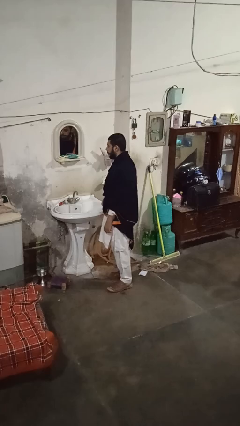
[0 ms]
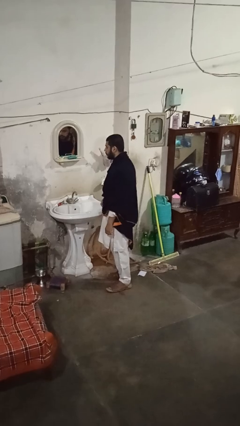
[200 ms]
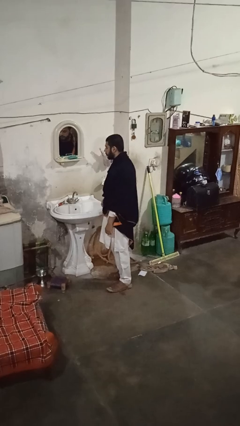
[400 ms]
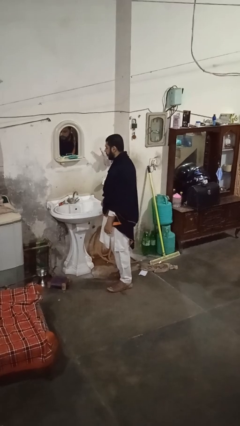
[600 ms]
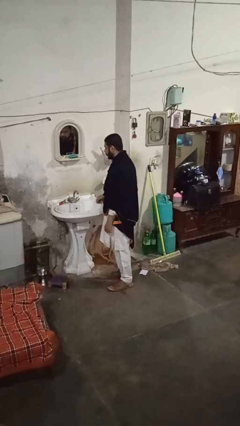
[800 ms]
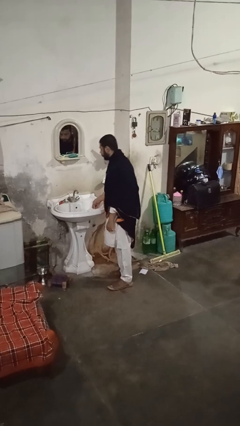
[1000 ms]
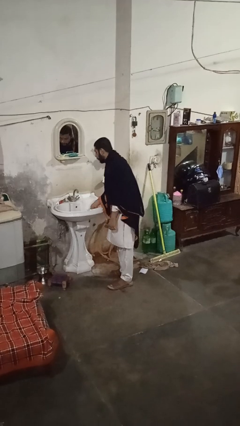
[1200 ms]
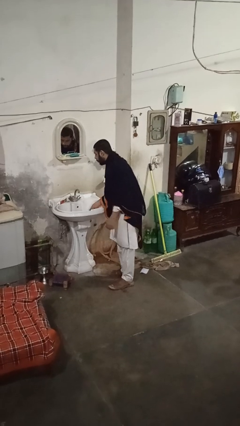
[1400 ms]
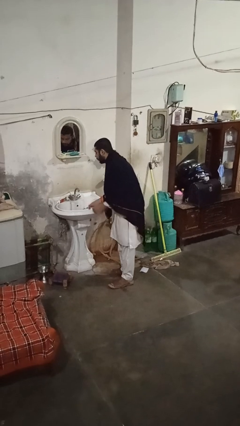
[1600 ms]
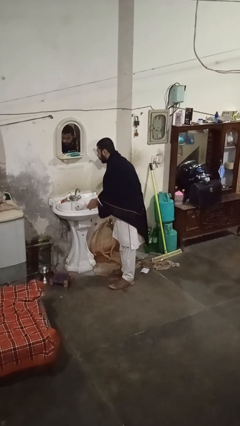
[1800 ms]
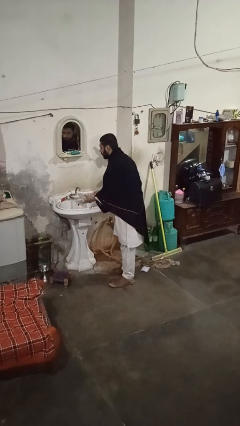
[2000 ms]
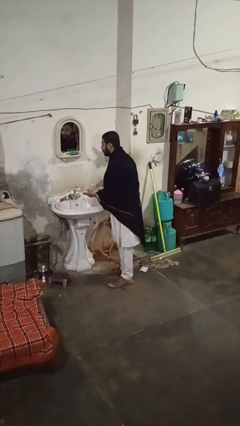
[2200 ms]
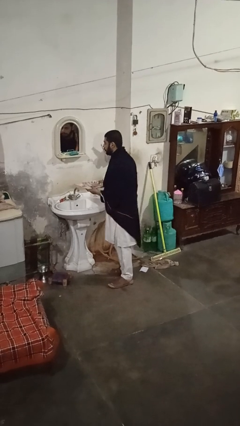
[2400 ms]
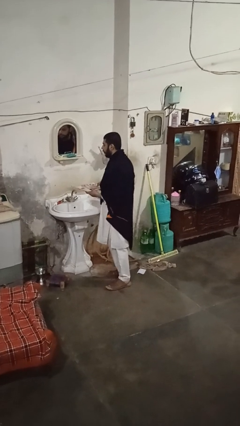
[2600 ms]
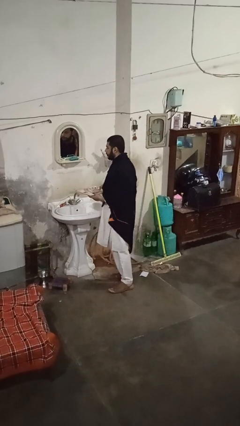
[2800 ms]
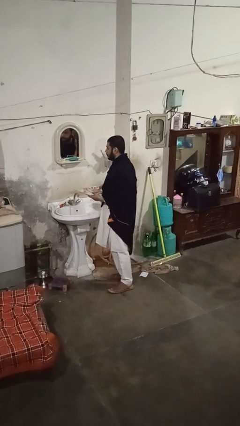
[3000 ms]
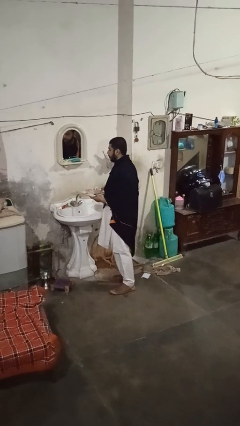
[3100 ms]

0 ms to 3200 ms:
person unloads dishwasher

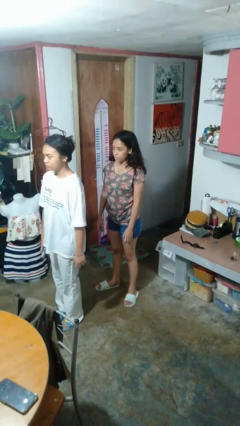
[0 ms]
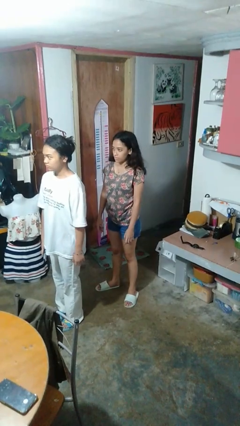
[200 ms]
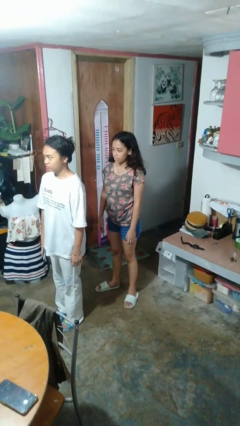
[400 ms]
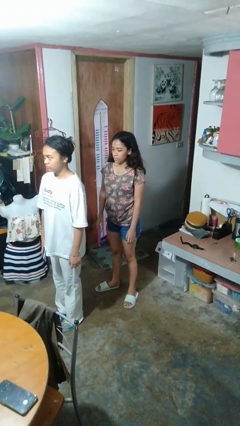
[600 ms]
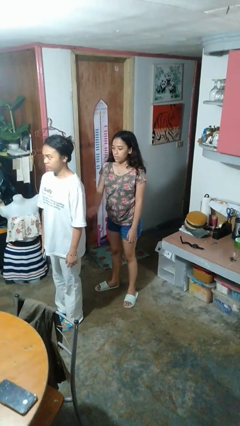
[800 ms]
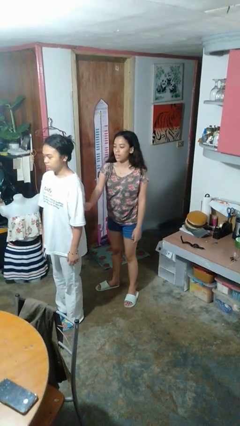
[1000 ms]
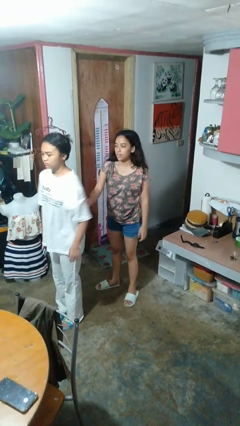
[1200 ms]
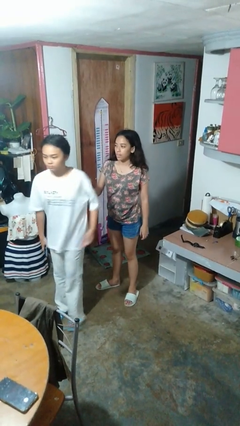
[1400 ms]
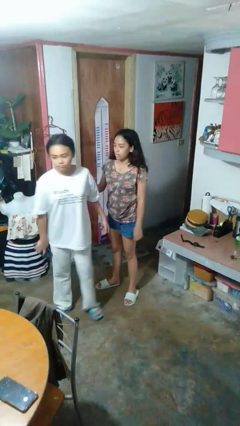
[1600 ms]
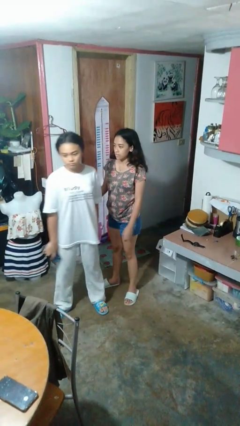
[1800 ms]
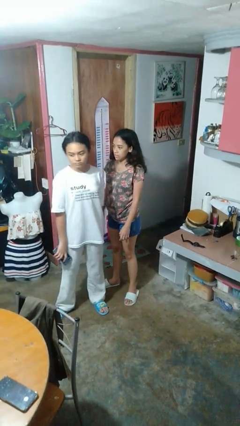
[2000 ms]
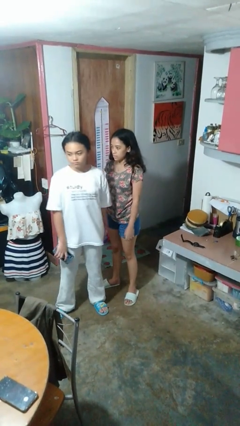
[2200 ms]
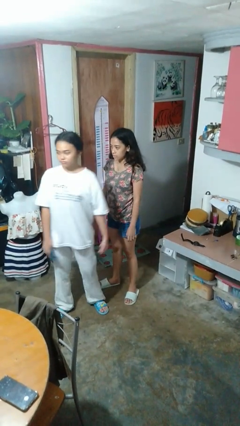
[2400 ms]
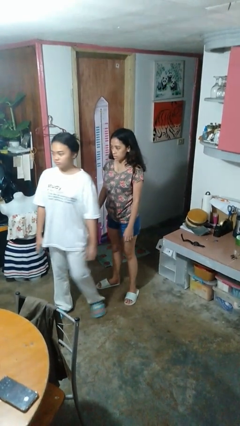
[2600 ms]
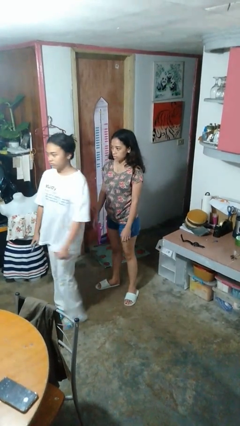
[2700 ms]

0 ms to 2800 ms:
person grabs person by bicep

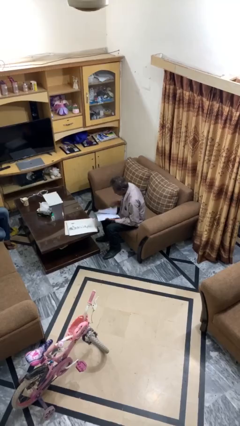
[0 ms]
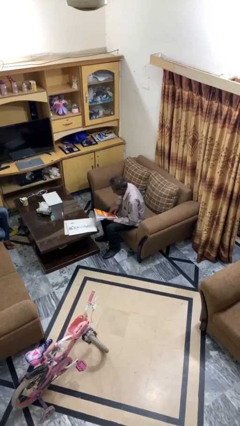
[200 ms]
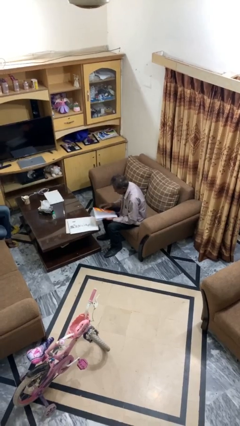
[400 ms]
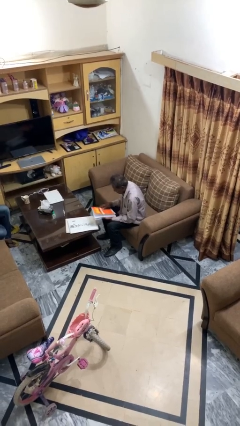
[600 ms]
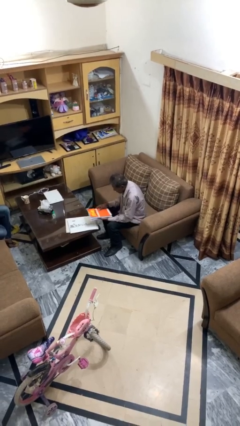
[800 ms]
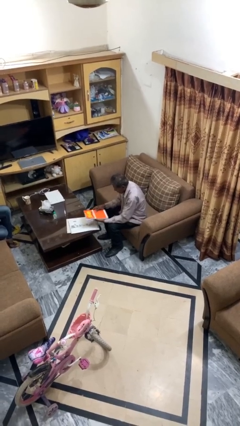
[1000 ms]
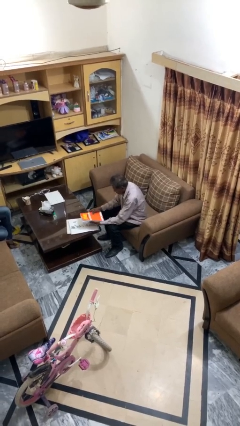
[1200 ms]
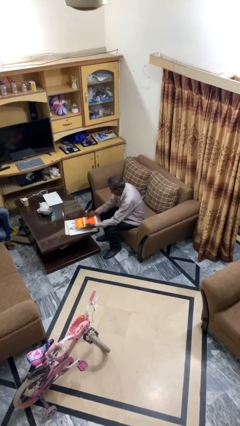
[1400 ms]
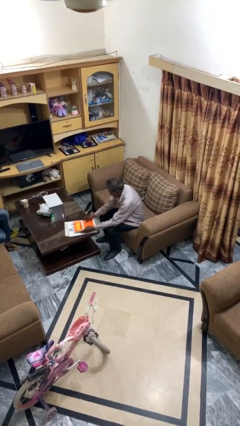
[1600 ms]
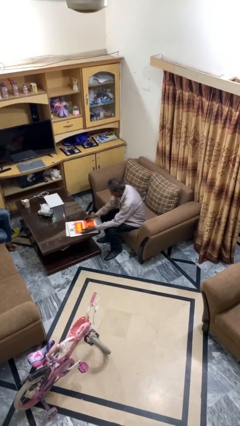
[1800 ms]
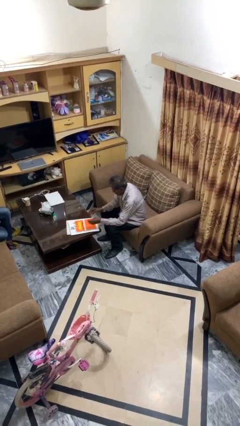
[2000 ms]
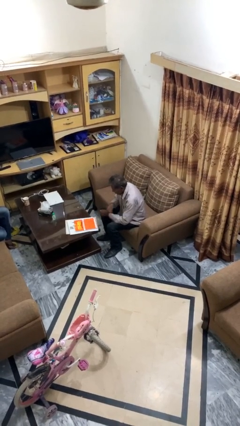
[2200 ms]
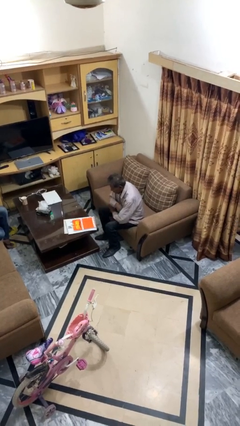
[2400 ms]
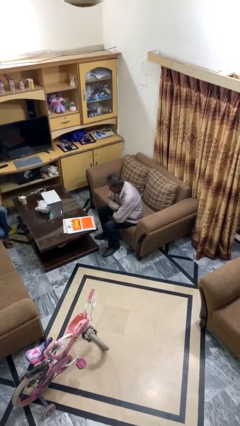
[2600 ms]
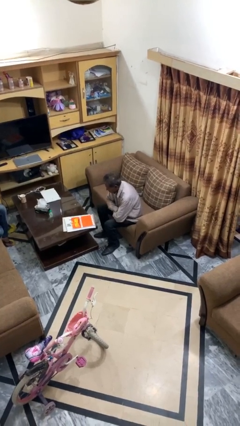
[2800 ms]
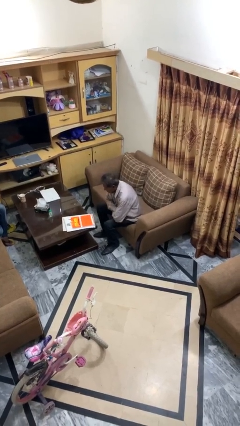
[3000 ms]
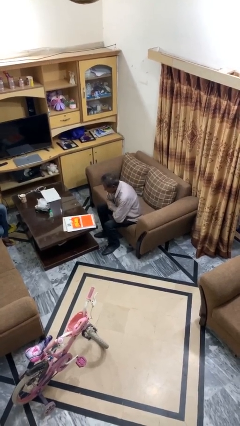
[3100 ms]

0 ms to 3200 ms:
person puts down object on table

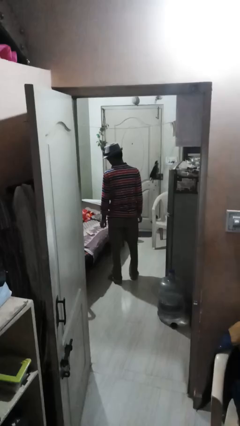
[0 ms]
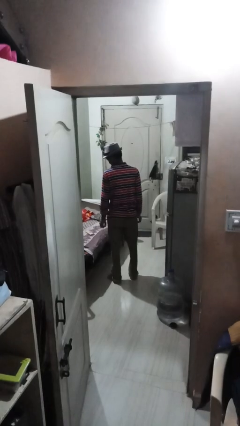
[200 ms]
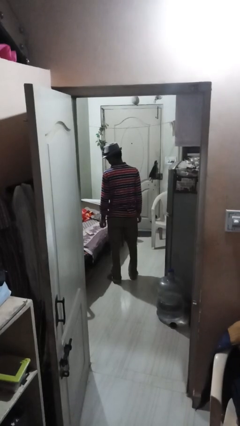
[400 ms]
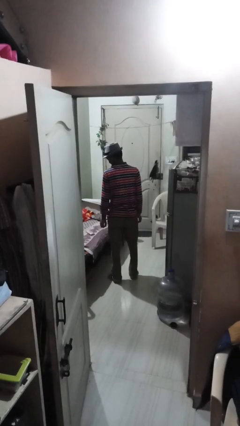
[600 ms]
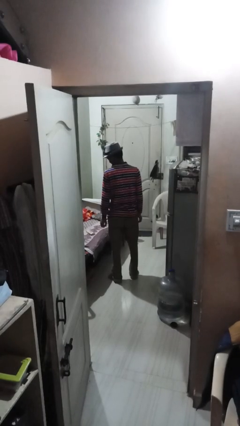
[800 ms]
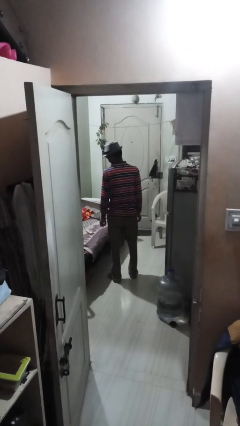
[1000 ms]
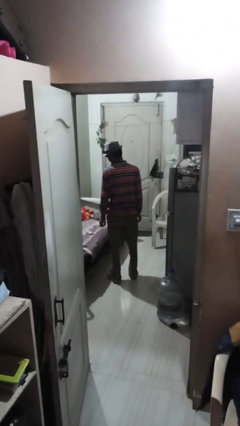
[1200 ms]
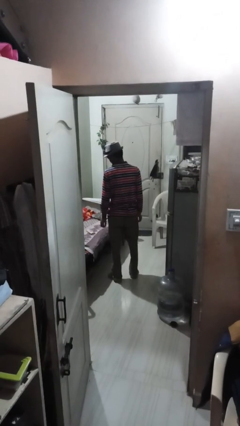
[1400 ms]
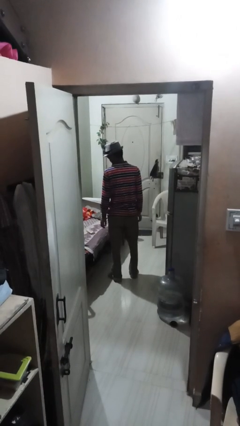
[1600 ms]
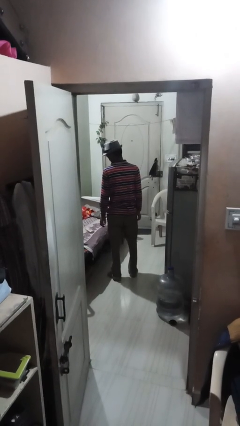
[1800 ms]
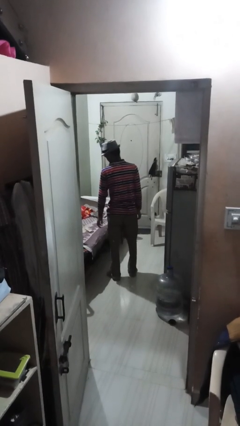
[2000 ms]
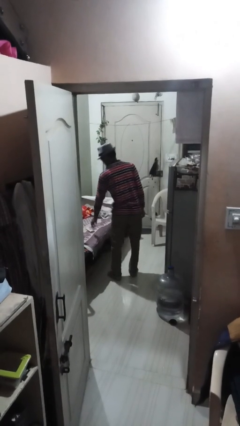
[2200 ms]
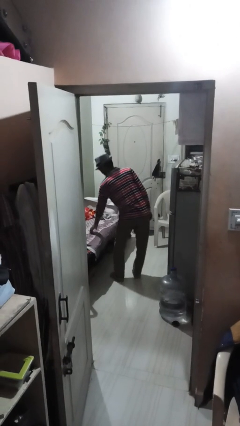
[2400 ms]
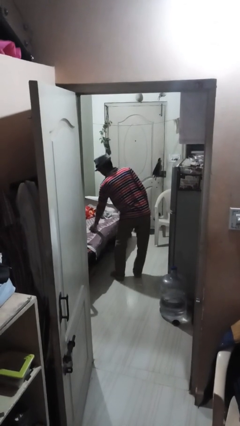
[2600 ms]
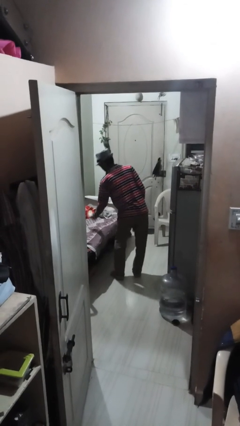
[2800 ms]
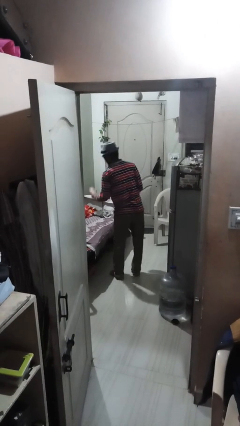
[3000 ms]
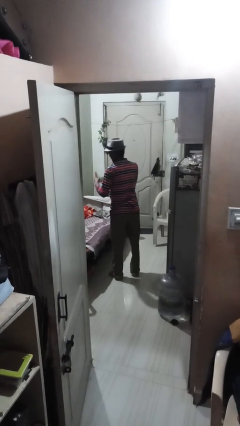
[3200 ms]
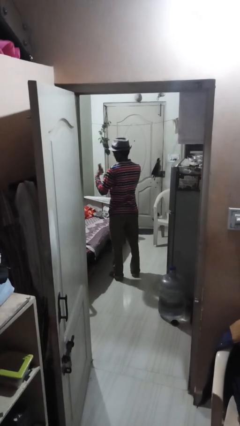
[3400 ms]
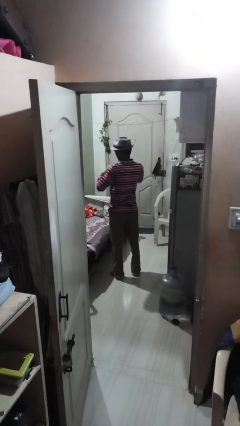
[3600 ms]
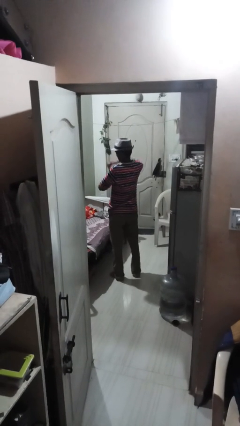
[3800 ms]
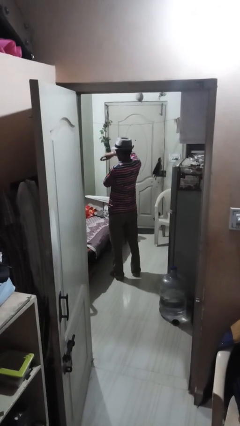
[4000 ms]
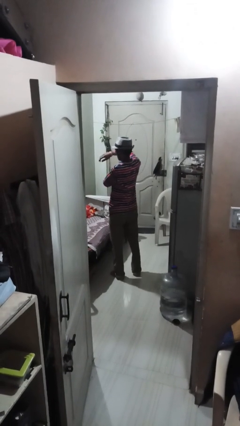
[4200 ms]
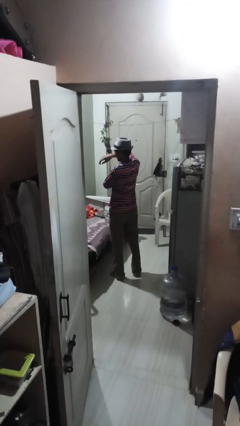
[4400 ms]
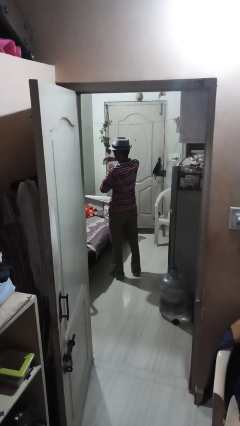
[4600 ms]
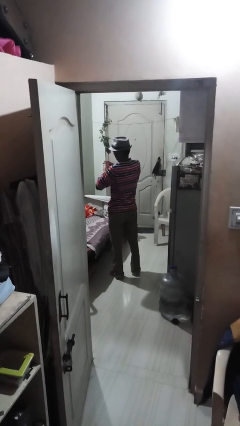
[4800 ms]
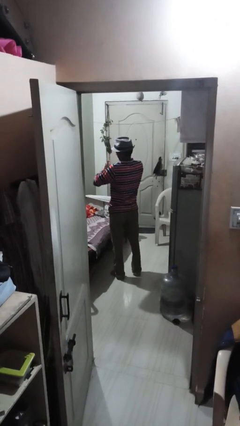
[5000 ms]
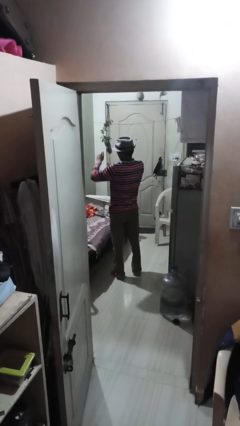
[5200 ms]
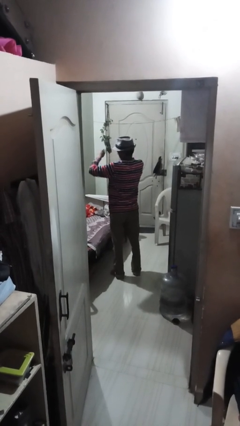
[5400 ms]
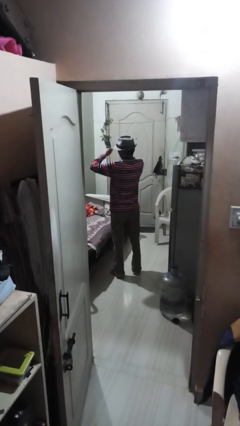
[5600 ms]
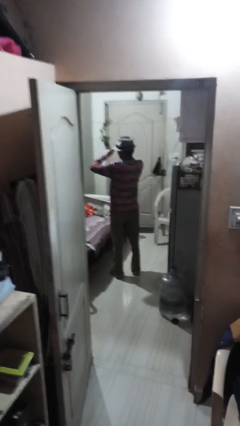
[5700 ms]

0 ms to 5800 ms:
person applies deodorant

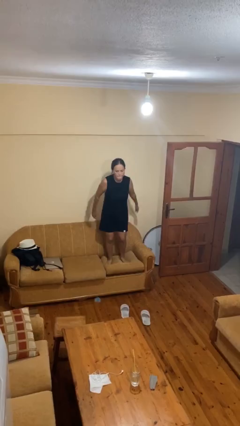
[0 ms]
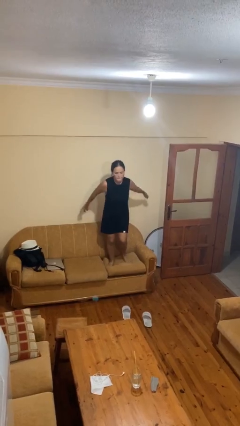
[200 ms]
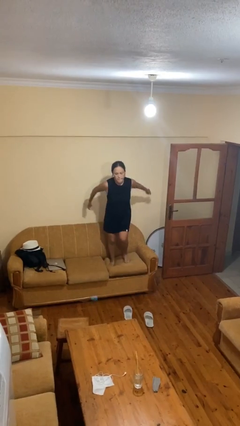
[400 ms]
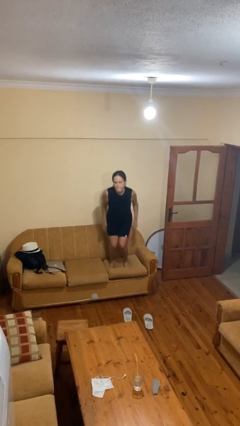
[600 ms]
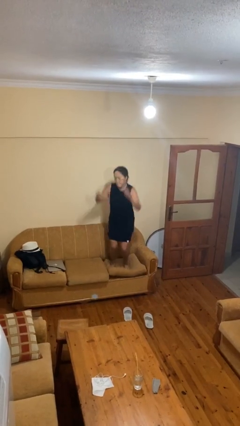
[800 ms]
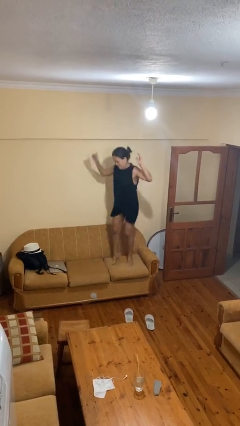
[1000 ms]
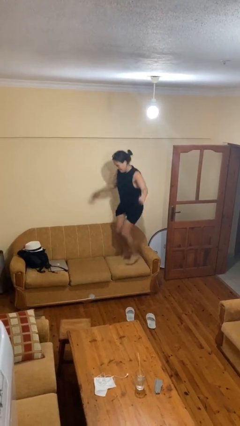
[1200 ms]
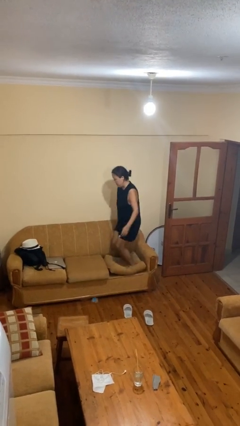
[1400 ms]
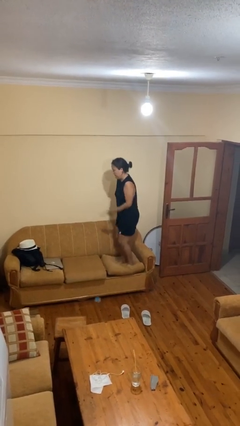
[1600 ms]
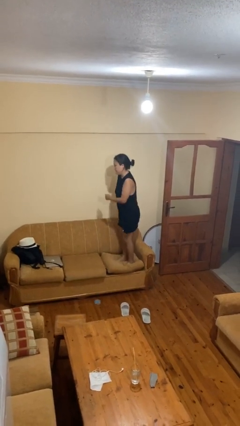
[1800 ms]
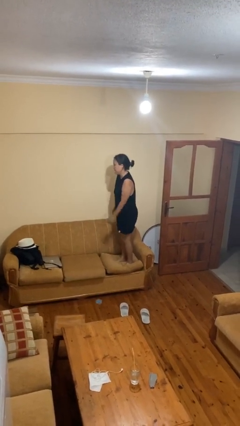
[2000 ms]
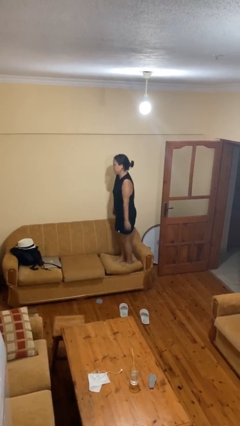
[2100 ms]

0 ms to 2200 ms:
person jumps on couch

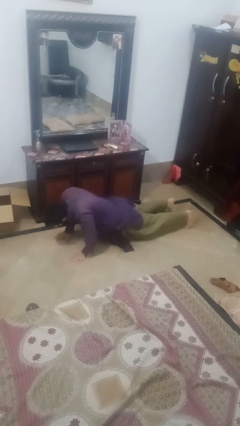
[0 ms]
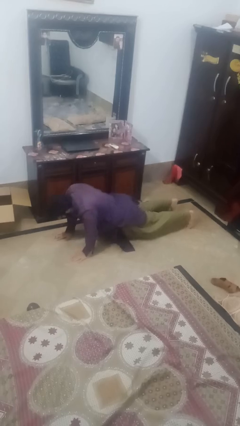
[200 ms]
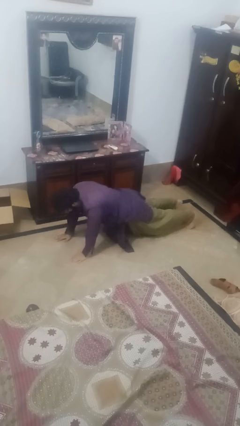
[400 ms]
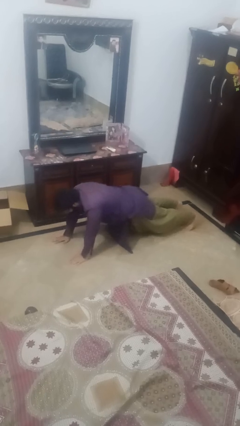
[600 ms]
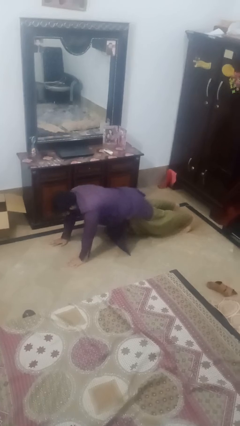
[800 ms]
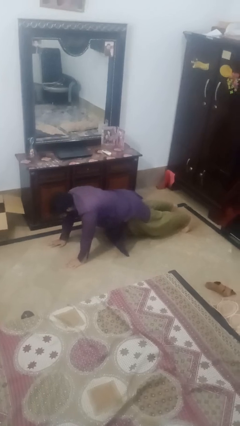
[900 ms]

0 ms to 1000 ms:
person exercises with pushup
